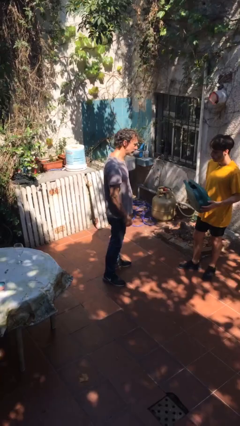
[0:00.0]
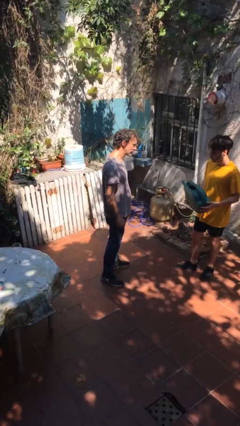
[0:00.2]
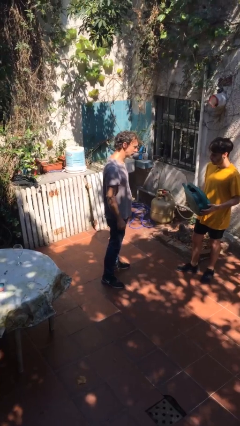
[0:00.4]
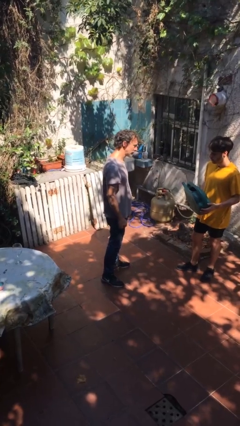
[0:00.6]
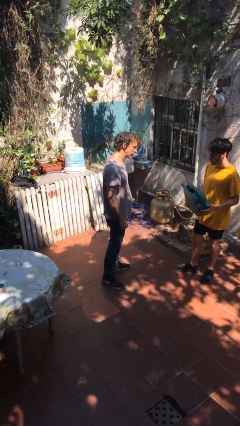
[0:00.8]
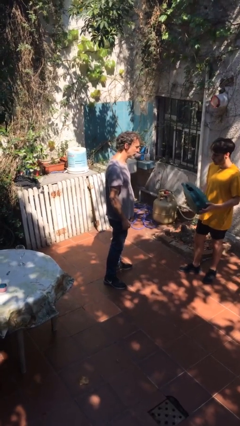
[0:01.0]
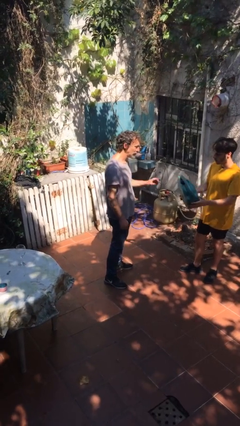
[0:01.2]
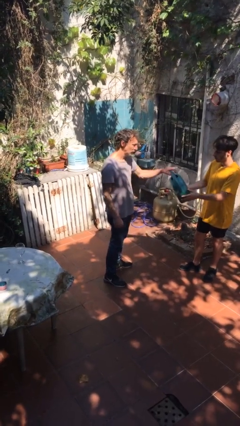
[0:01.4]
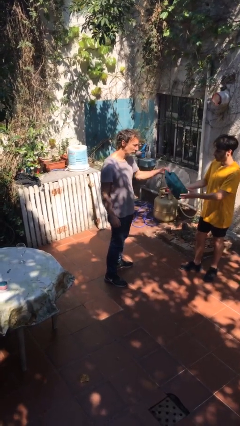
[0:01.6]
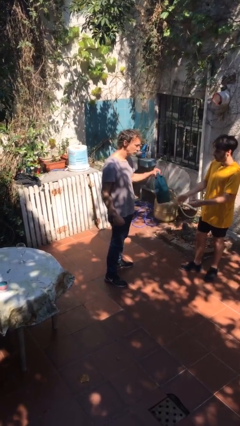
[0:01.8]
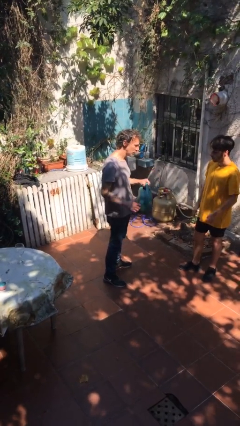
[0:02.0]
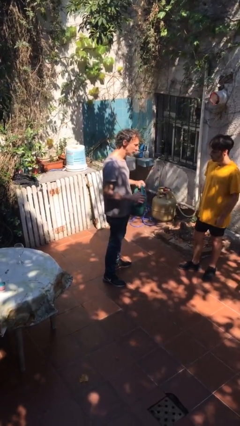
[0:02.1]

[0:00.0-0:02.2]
person transfers object to person

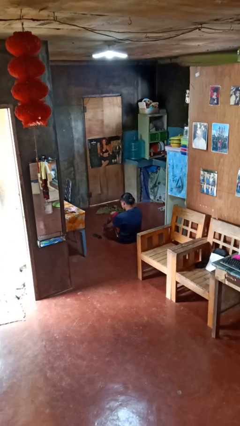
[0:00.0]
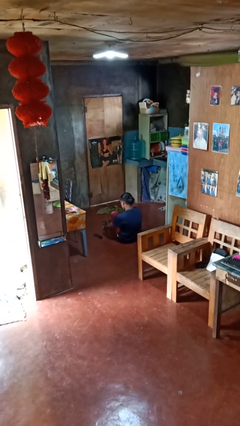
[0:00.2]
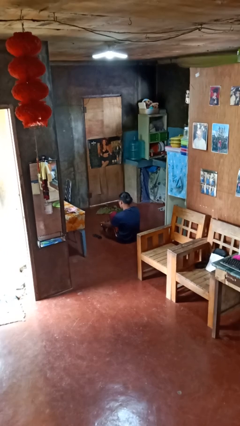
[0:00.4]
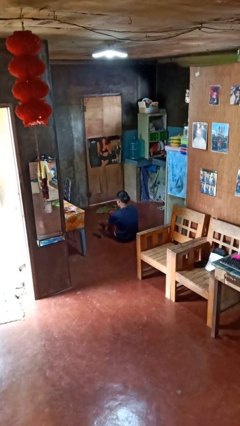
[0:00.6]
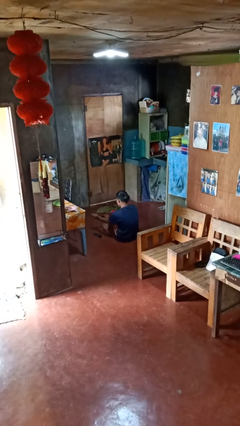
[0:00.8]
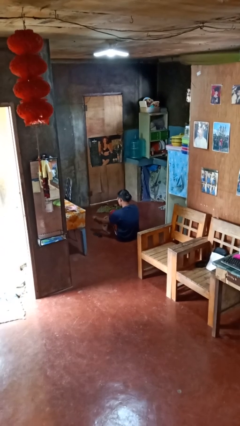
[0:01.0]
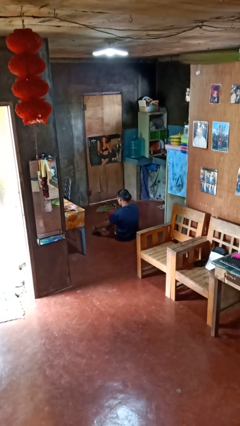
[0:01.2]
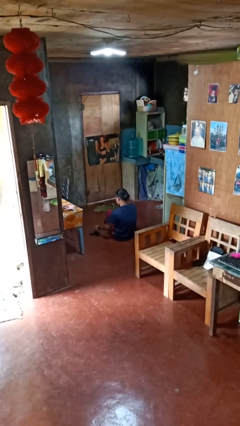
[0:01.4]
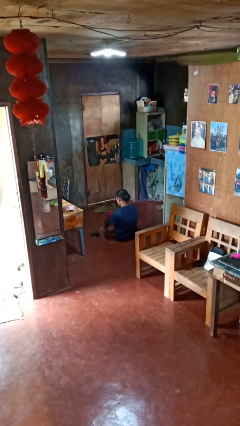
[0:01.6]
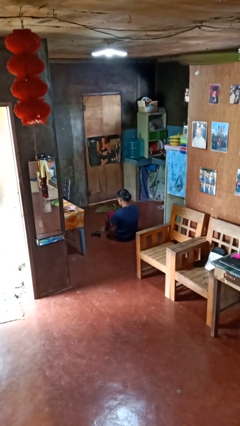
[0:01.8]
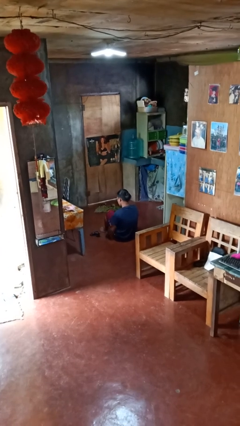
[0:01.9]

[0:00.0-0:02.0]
person takes off socks

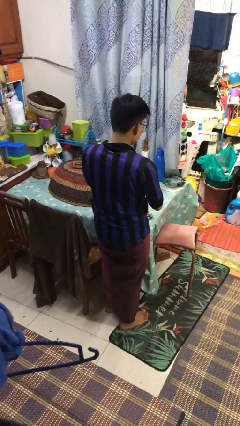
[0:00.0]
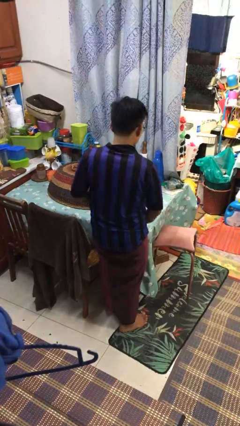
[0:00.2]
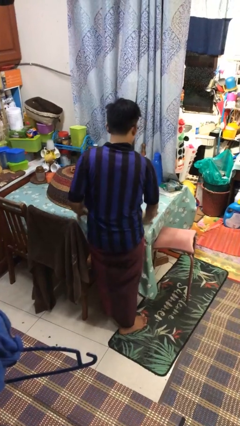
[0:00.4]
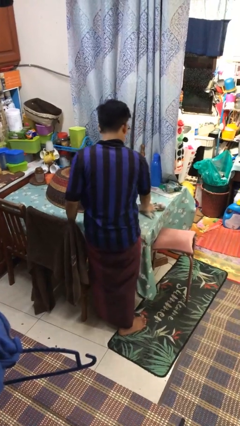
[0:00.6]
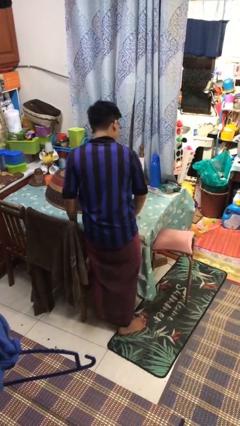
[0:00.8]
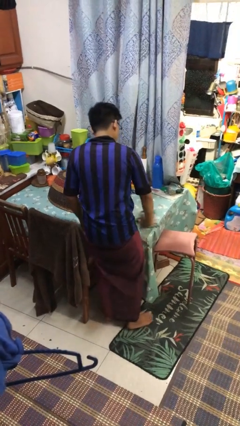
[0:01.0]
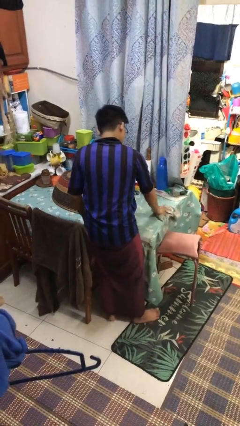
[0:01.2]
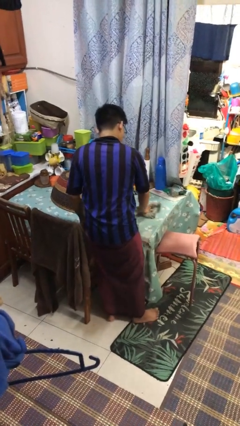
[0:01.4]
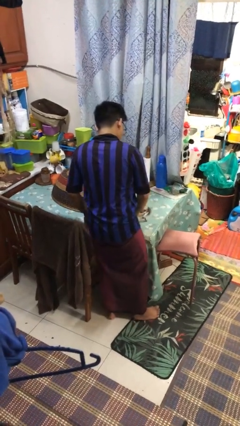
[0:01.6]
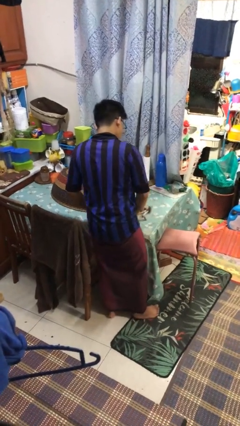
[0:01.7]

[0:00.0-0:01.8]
person cleans table with rag

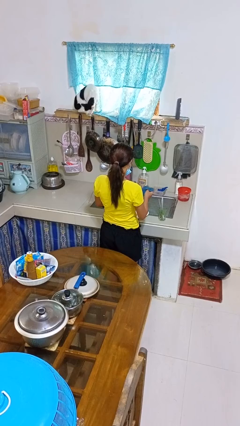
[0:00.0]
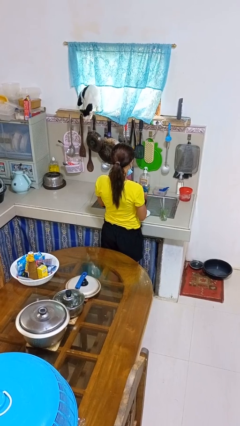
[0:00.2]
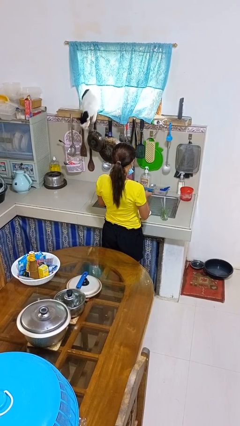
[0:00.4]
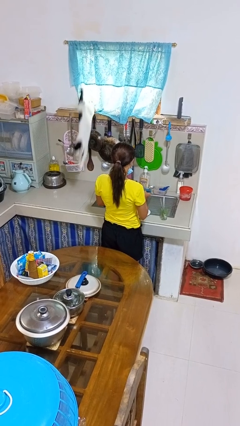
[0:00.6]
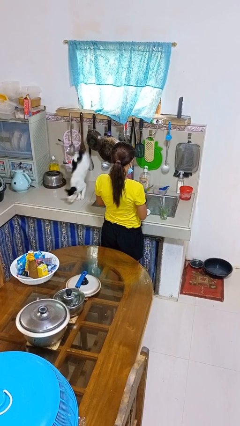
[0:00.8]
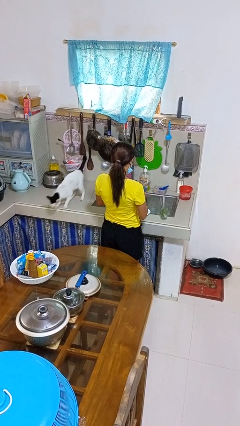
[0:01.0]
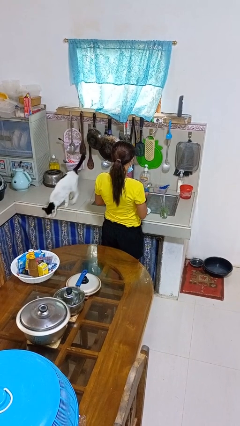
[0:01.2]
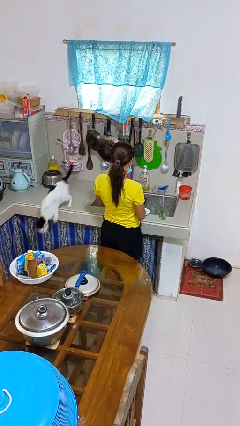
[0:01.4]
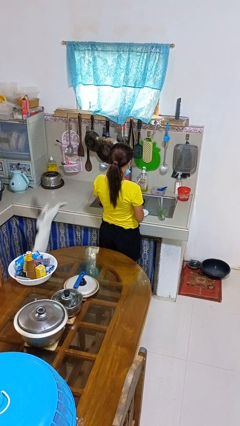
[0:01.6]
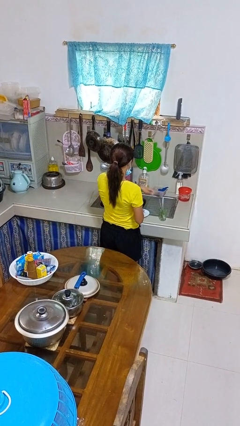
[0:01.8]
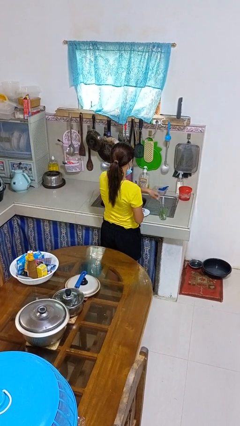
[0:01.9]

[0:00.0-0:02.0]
person dries dish

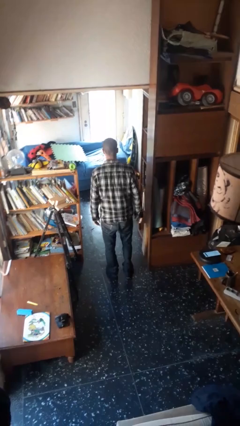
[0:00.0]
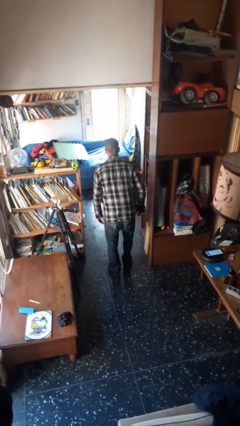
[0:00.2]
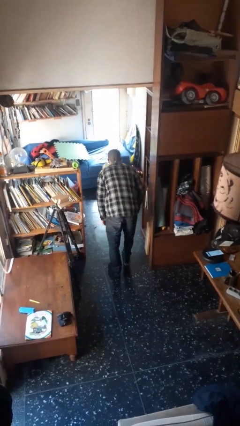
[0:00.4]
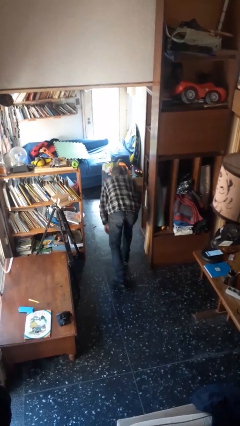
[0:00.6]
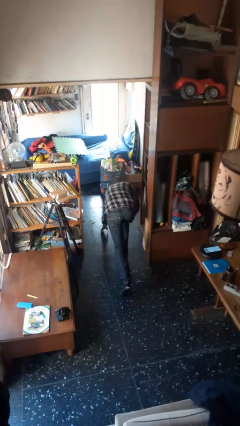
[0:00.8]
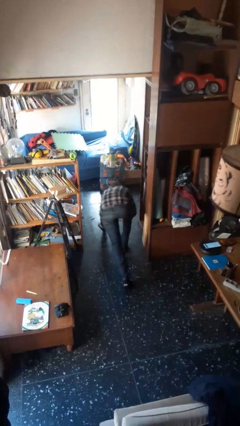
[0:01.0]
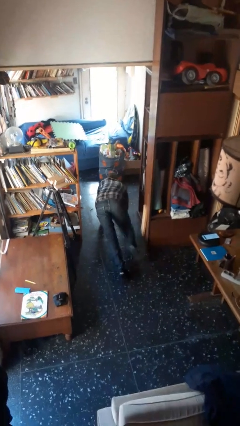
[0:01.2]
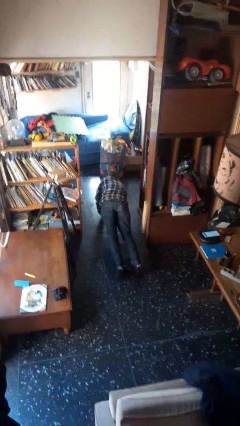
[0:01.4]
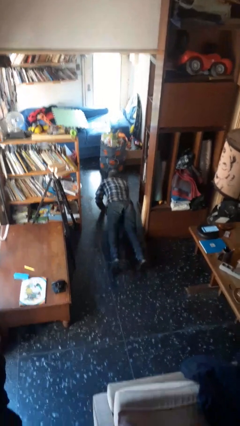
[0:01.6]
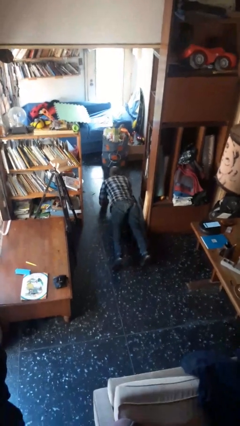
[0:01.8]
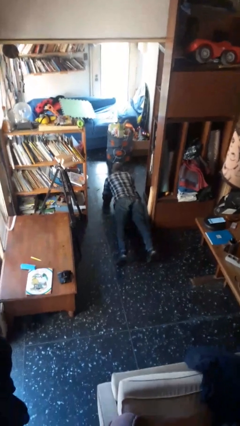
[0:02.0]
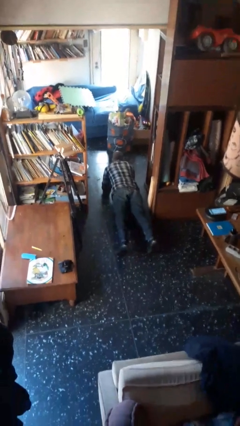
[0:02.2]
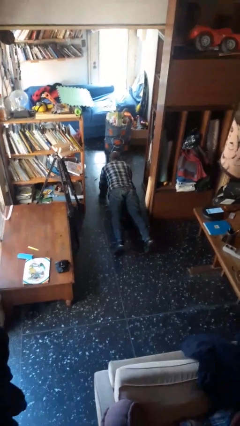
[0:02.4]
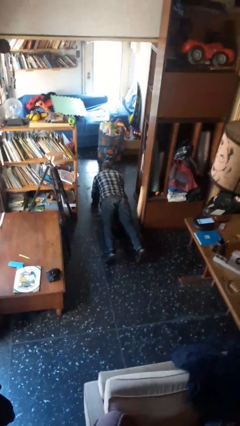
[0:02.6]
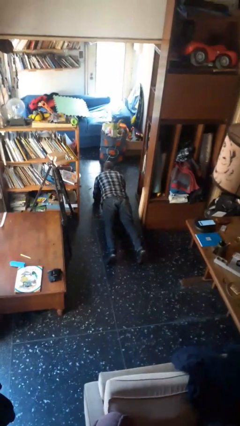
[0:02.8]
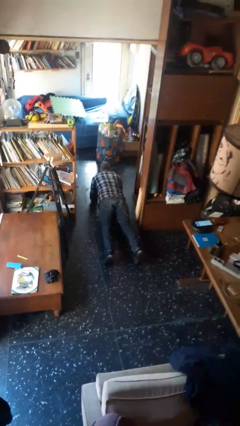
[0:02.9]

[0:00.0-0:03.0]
person exercises with plank

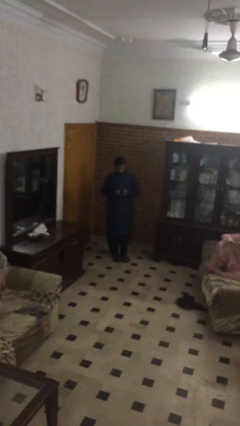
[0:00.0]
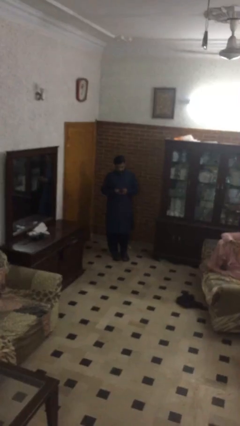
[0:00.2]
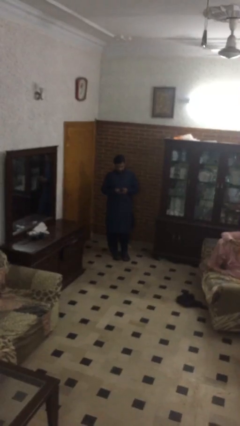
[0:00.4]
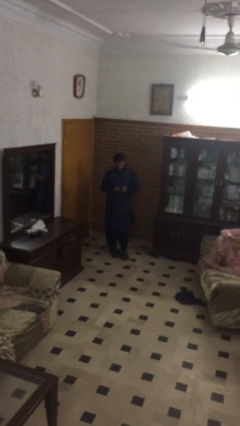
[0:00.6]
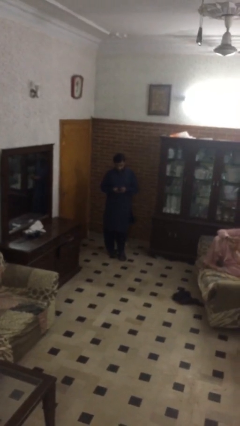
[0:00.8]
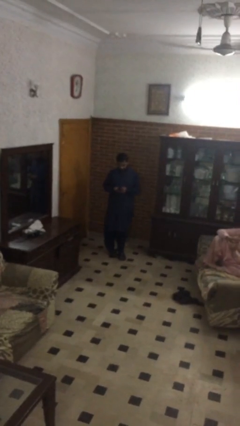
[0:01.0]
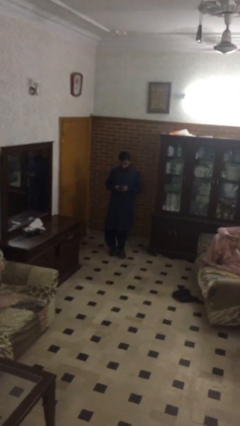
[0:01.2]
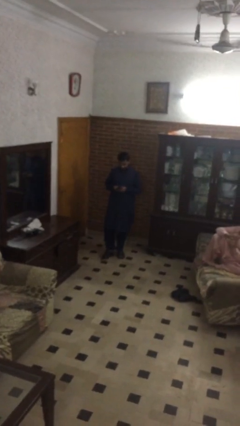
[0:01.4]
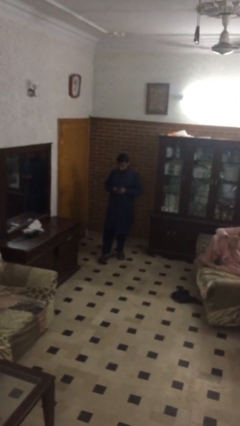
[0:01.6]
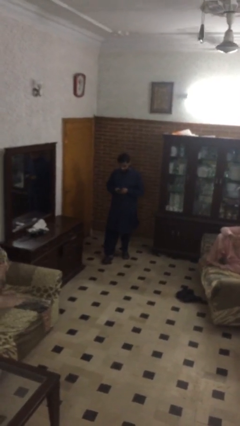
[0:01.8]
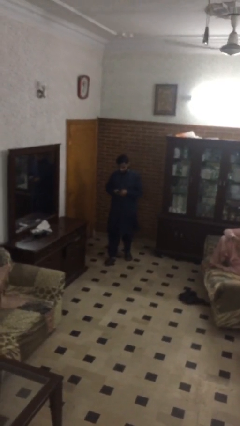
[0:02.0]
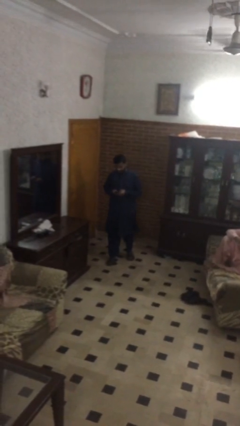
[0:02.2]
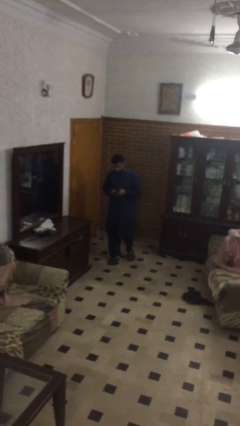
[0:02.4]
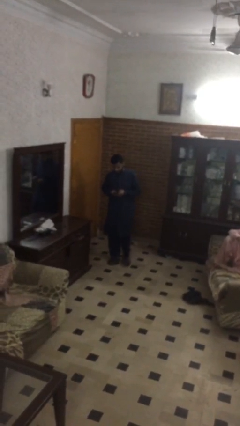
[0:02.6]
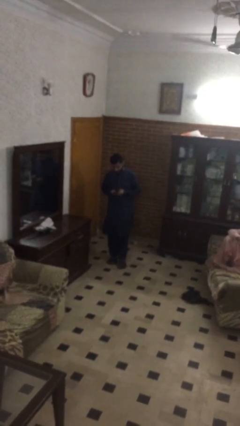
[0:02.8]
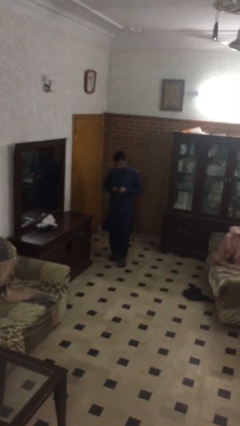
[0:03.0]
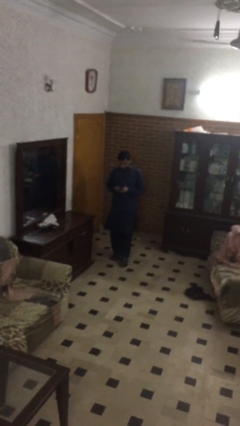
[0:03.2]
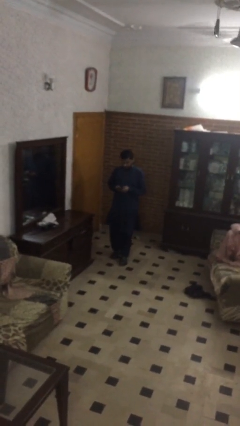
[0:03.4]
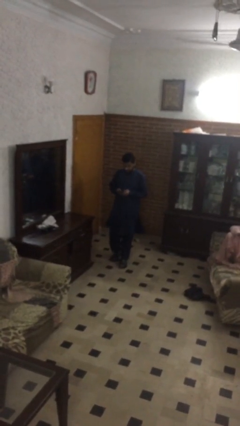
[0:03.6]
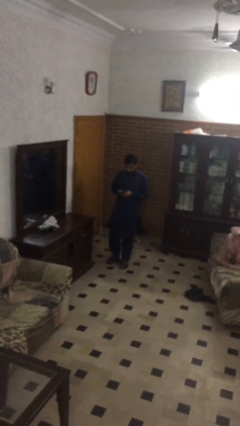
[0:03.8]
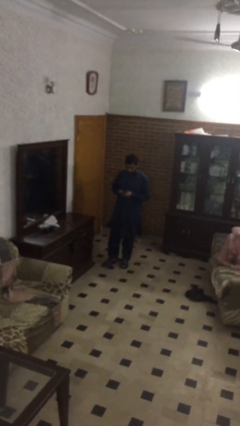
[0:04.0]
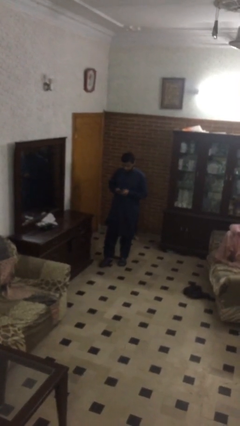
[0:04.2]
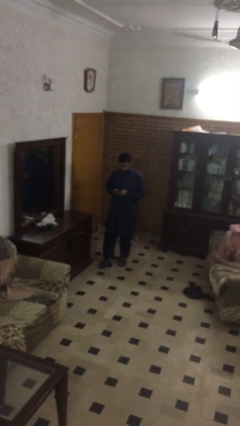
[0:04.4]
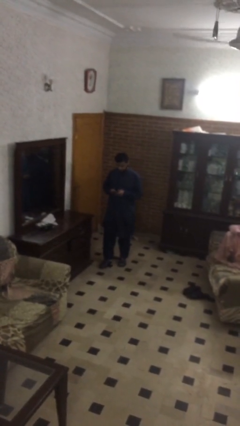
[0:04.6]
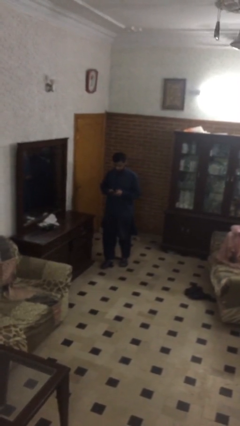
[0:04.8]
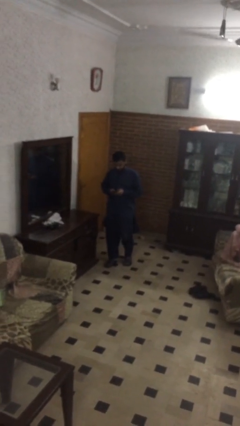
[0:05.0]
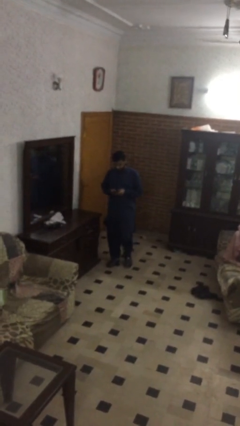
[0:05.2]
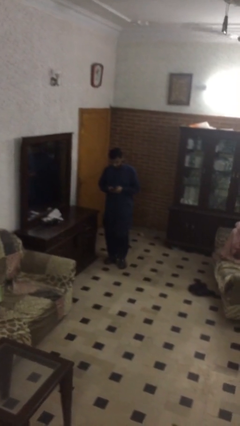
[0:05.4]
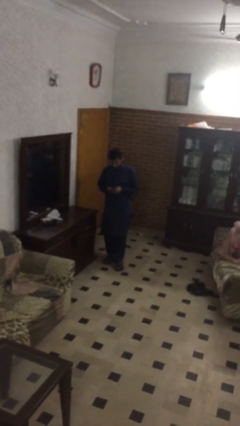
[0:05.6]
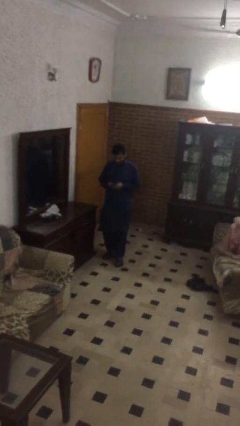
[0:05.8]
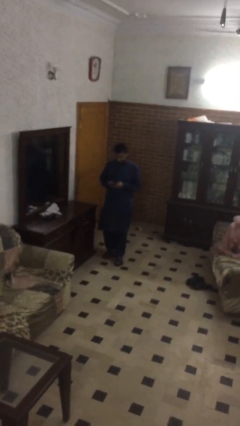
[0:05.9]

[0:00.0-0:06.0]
person texts on phone

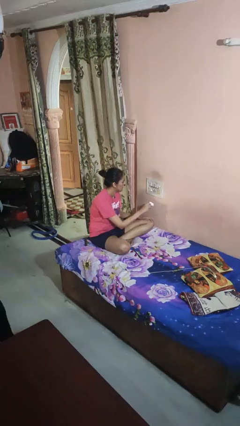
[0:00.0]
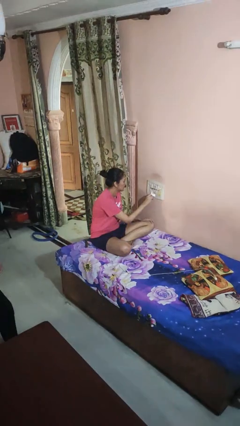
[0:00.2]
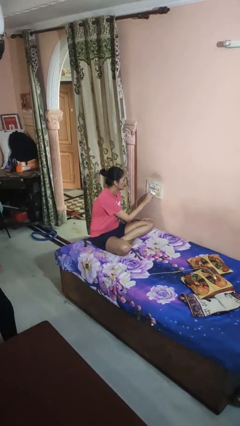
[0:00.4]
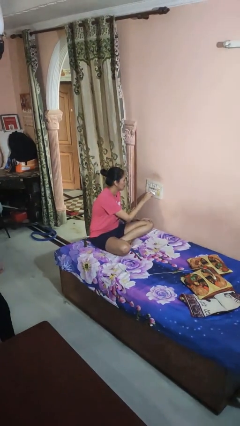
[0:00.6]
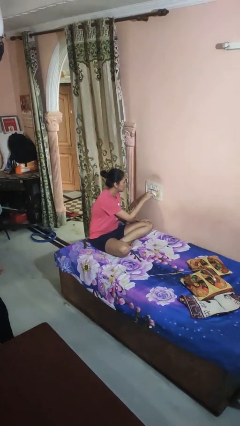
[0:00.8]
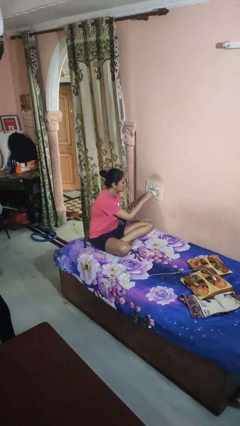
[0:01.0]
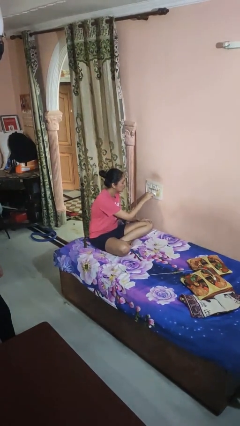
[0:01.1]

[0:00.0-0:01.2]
person plugs into electrical socket
